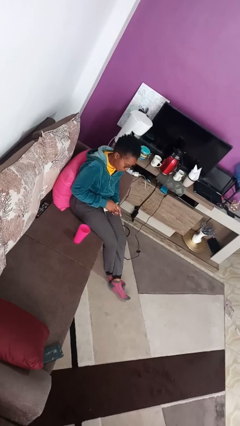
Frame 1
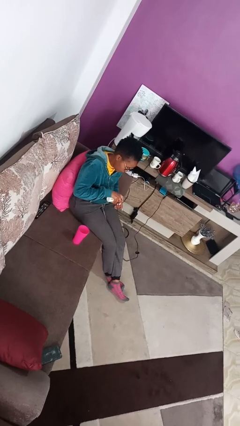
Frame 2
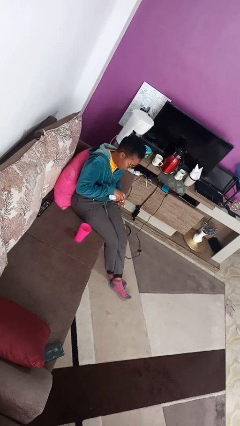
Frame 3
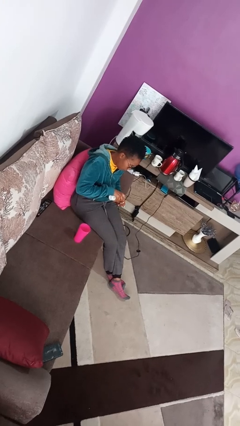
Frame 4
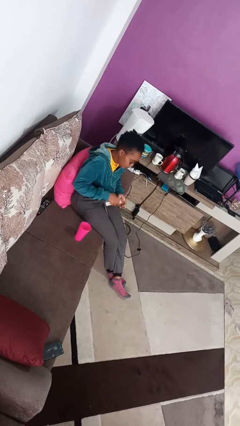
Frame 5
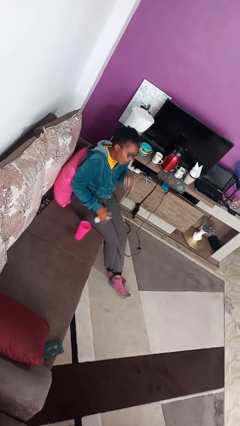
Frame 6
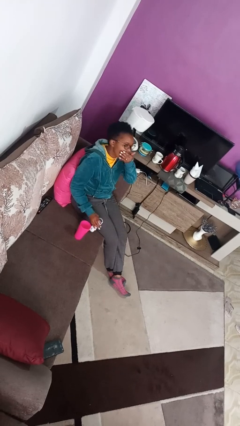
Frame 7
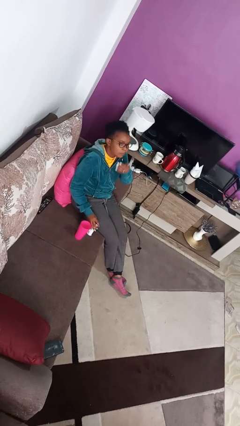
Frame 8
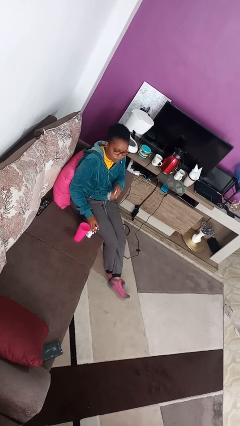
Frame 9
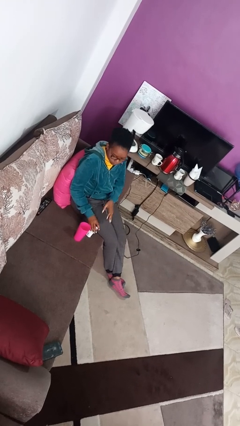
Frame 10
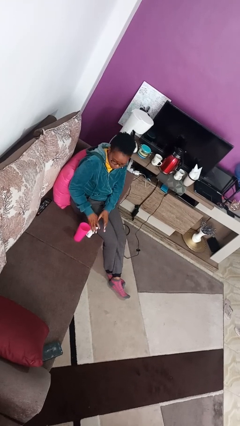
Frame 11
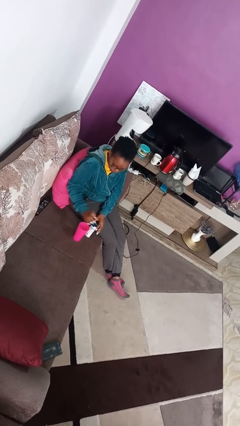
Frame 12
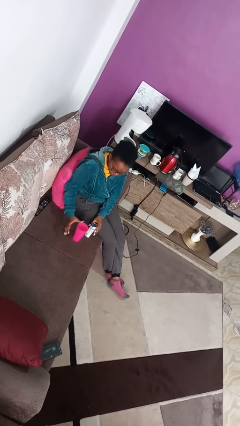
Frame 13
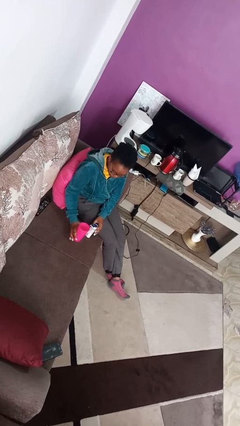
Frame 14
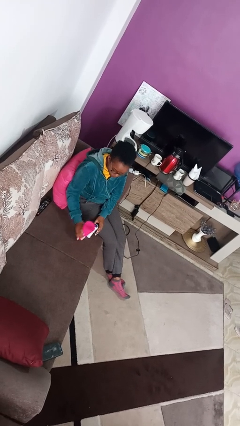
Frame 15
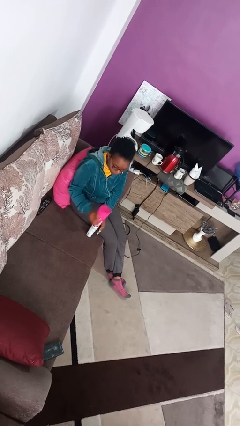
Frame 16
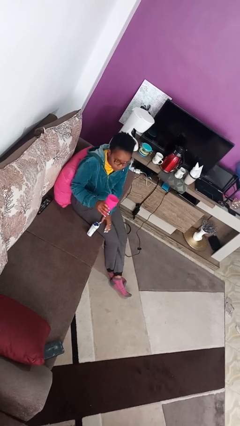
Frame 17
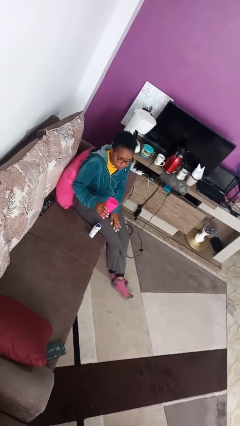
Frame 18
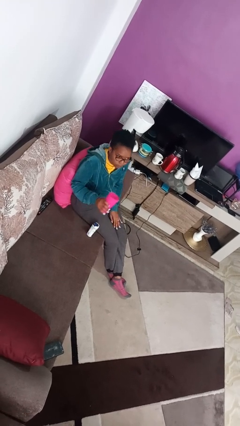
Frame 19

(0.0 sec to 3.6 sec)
person takes medicine pills

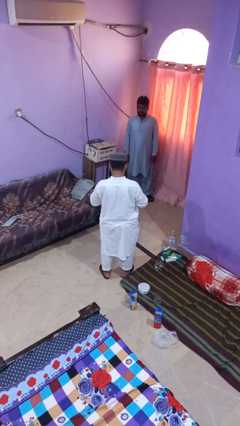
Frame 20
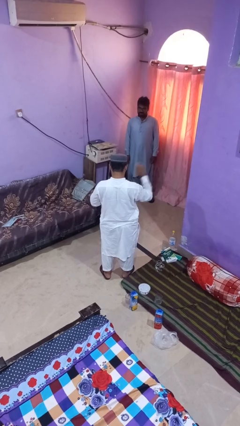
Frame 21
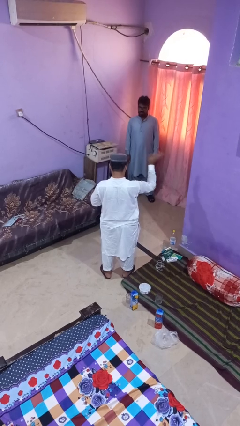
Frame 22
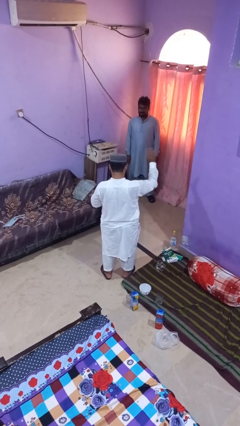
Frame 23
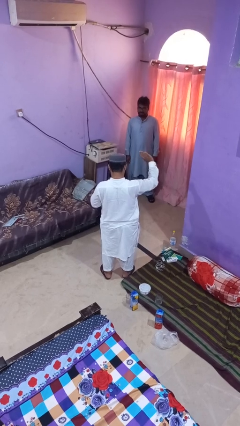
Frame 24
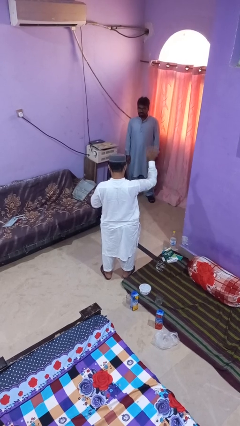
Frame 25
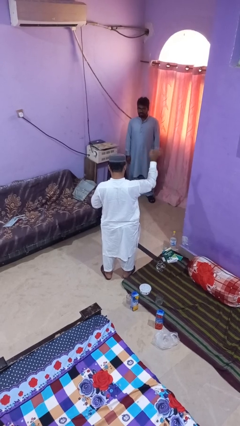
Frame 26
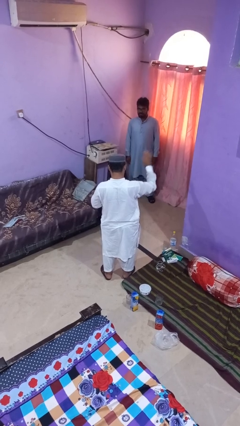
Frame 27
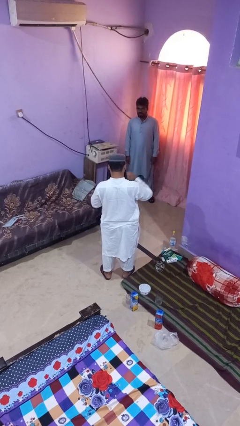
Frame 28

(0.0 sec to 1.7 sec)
person waves at person

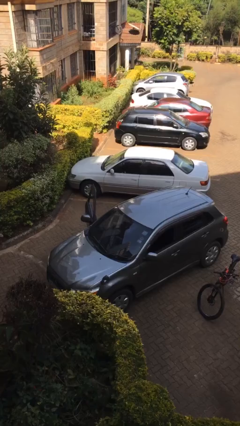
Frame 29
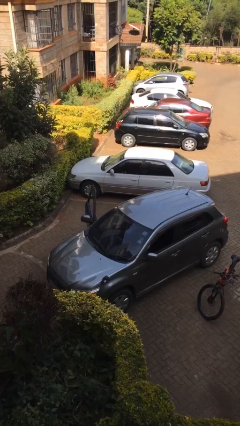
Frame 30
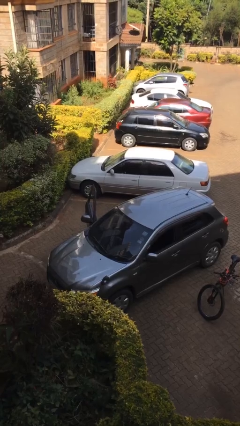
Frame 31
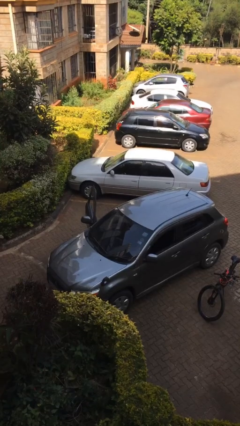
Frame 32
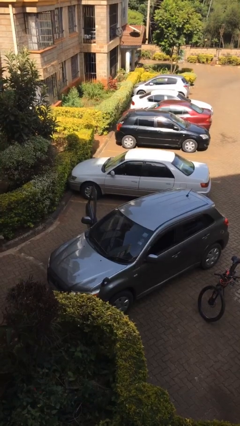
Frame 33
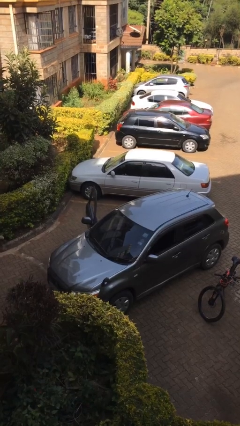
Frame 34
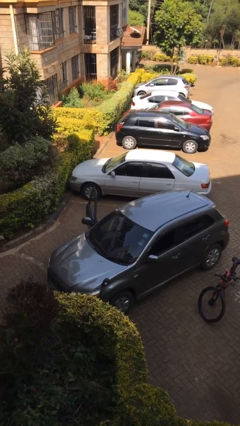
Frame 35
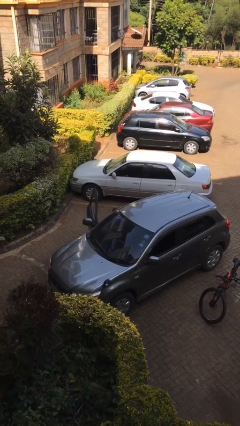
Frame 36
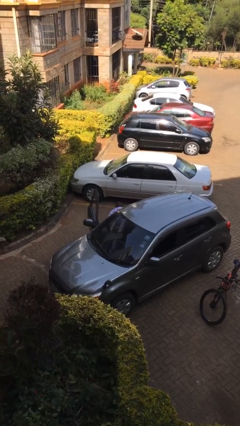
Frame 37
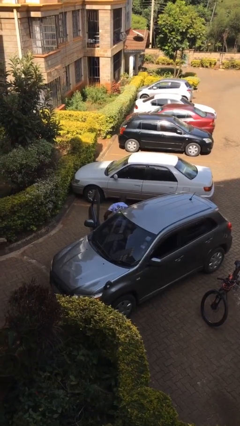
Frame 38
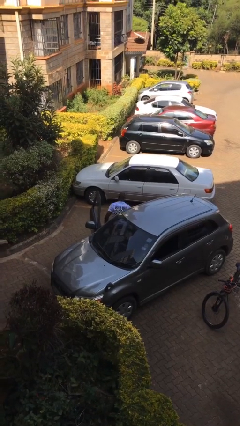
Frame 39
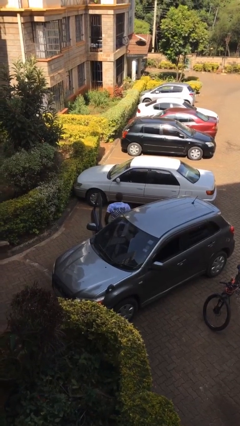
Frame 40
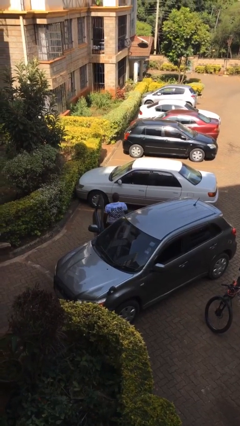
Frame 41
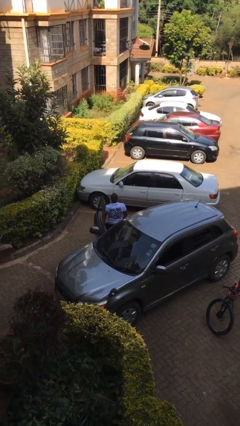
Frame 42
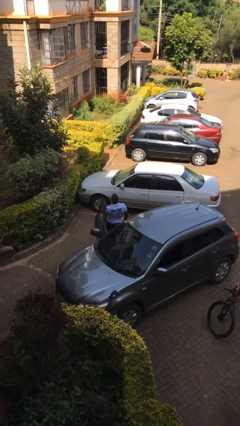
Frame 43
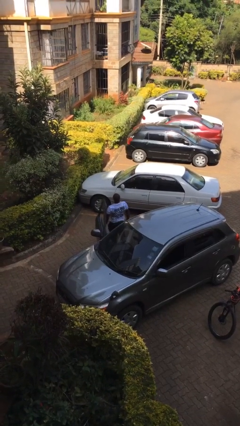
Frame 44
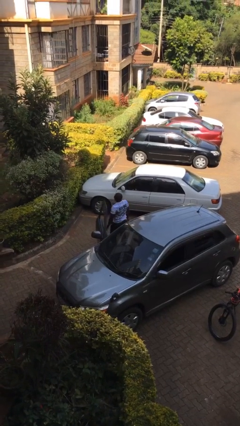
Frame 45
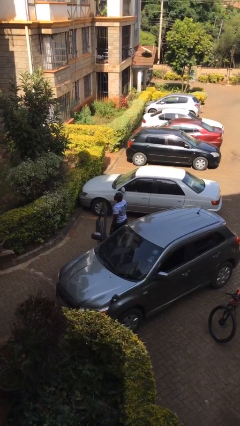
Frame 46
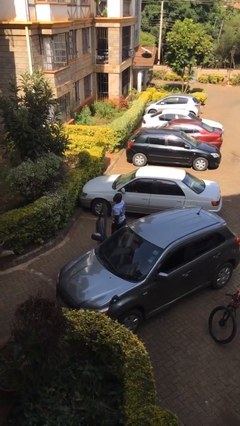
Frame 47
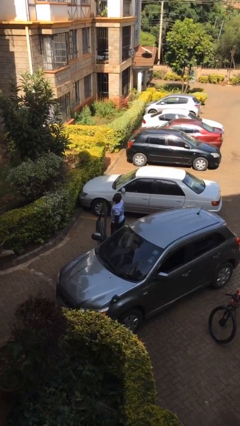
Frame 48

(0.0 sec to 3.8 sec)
person exits car

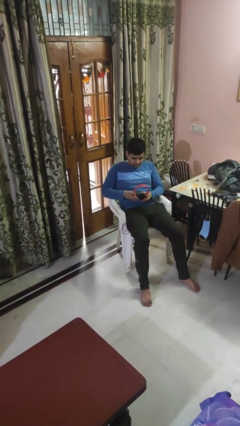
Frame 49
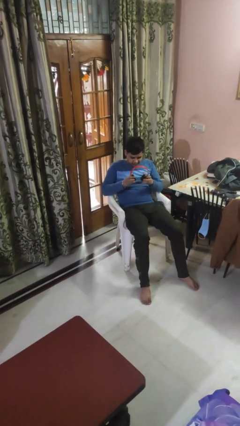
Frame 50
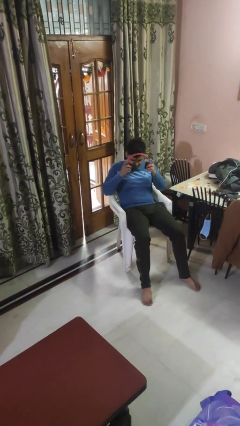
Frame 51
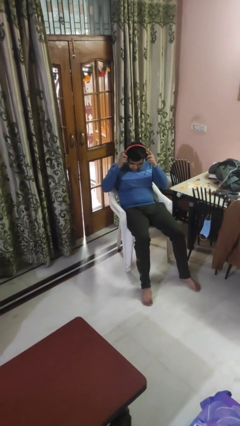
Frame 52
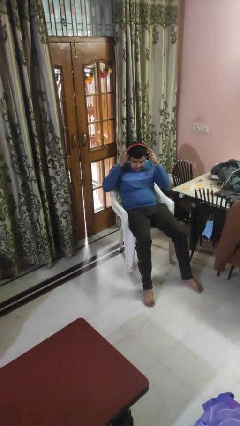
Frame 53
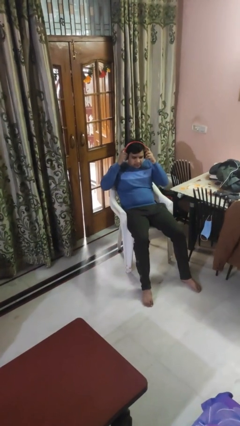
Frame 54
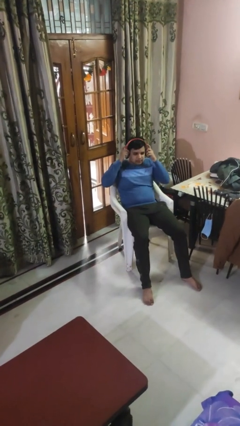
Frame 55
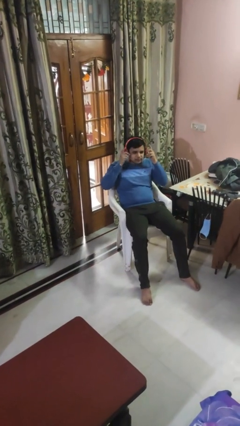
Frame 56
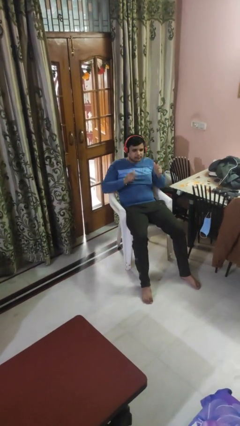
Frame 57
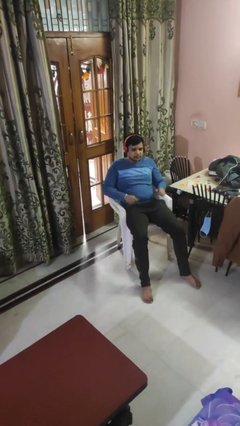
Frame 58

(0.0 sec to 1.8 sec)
person puts on headphones

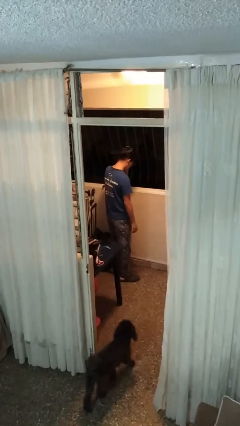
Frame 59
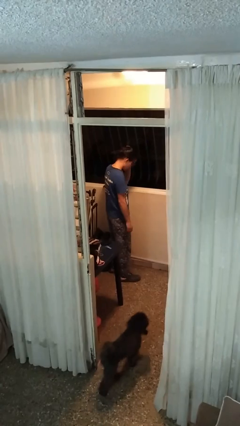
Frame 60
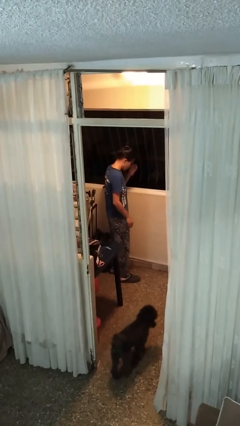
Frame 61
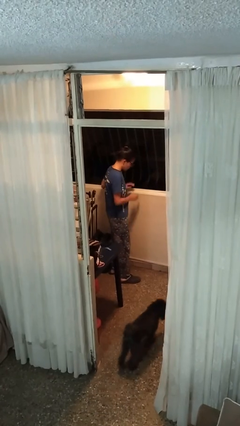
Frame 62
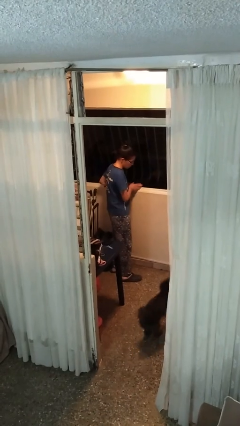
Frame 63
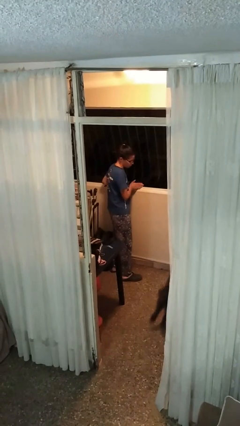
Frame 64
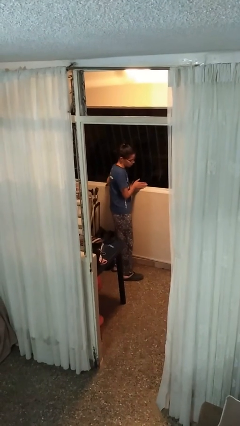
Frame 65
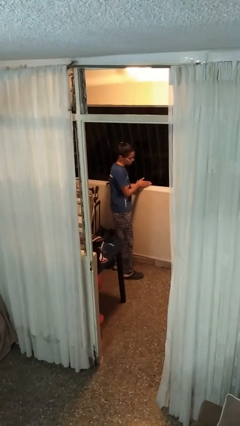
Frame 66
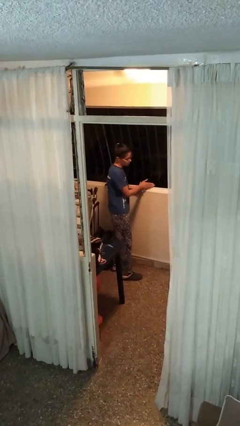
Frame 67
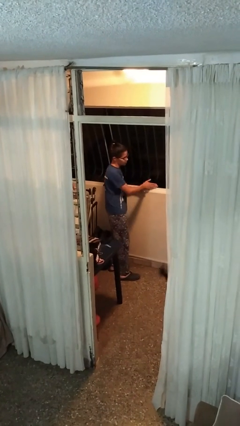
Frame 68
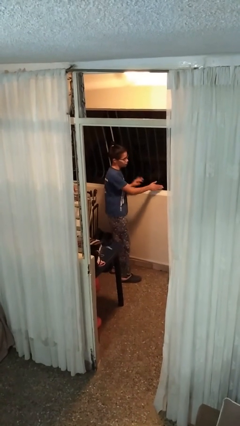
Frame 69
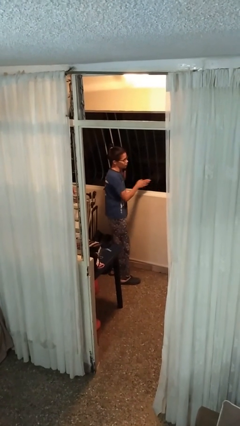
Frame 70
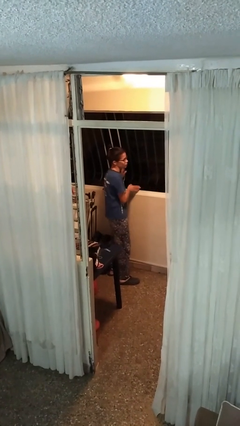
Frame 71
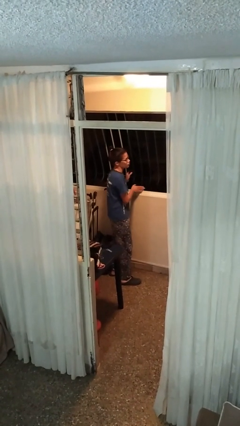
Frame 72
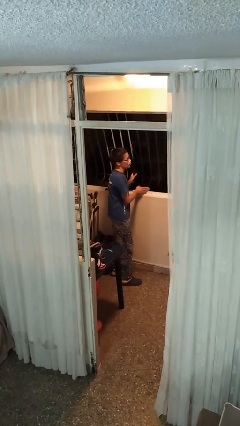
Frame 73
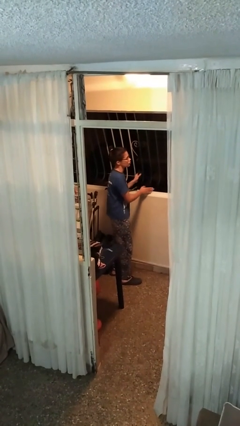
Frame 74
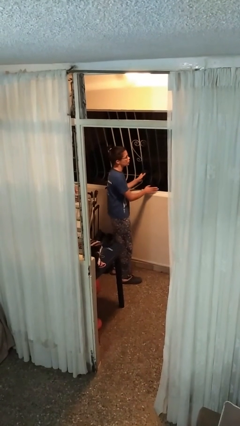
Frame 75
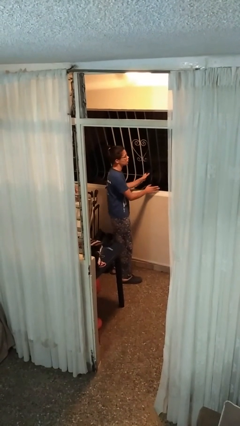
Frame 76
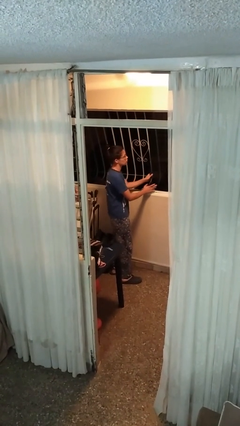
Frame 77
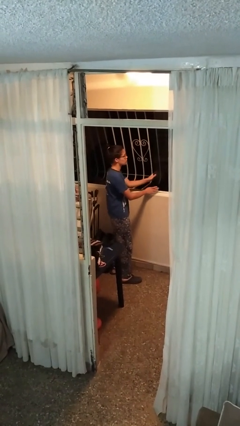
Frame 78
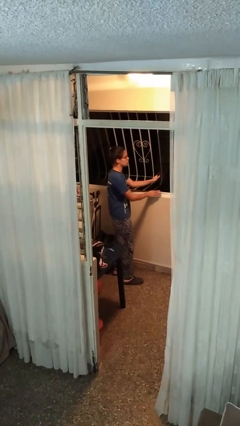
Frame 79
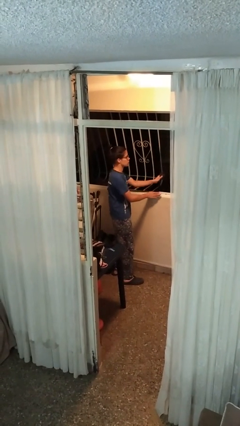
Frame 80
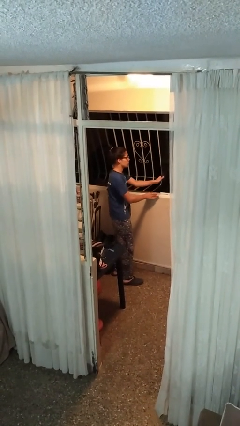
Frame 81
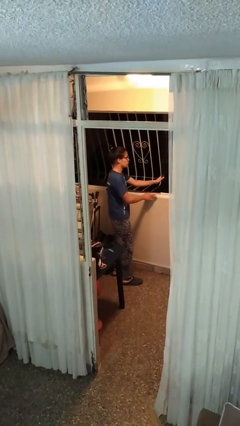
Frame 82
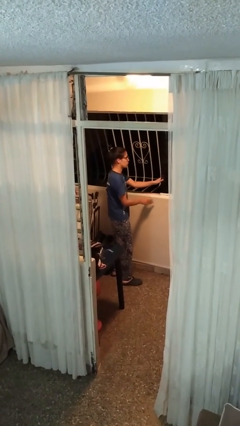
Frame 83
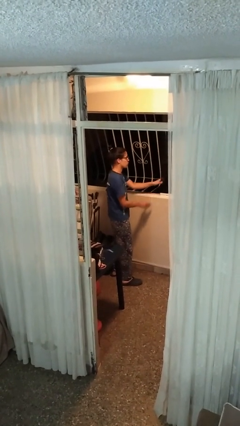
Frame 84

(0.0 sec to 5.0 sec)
person opens home window

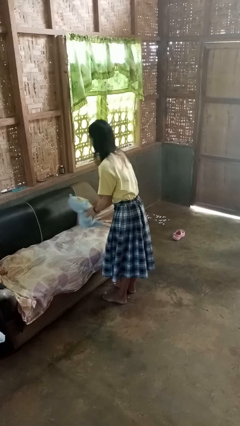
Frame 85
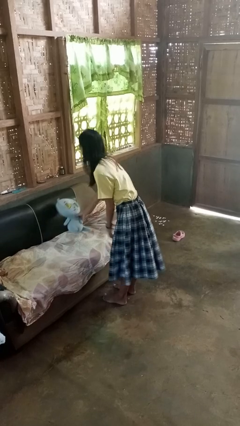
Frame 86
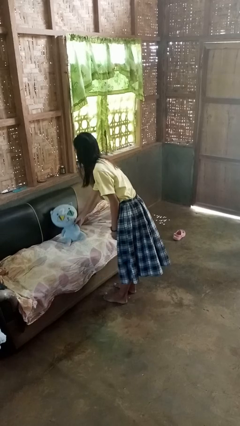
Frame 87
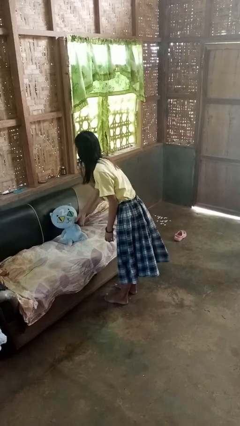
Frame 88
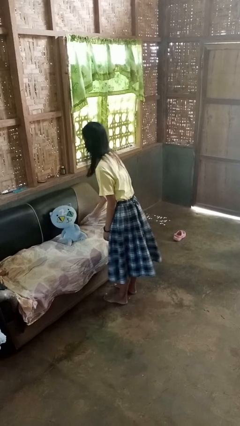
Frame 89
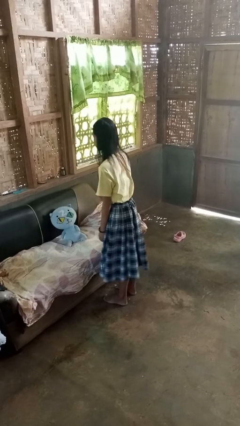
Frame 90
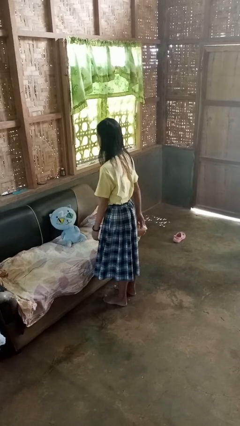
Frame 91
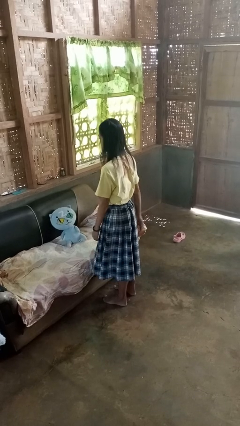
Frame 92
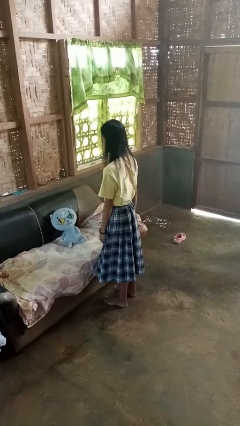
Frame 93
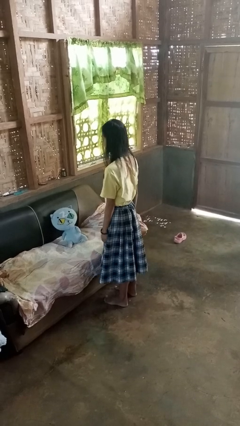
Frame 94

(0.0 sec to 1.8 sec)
person puts down object on couch
